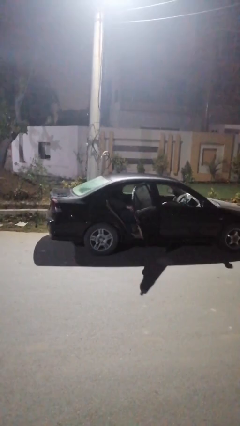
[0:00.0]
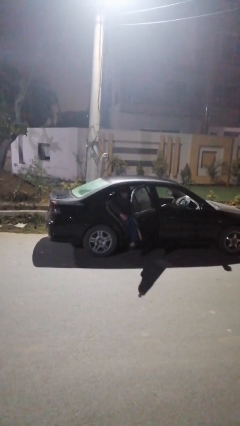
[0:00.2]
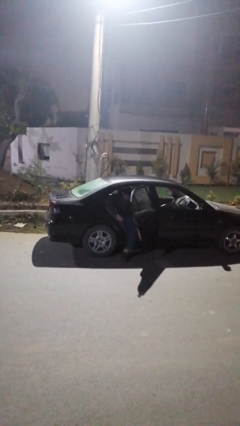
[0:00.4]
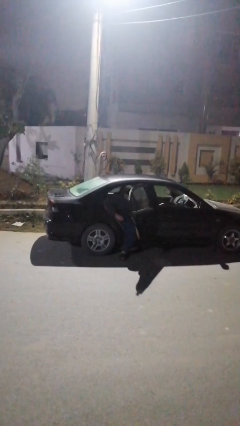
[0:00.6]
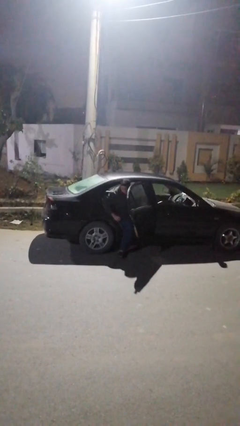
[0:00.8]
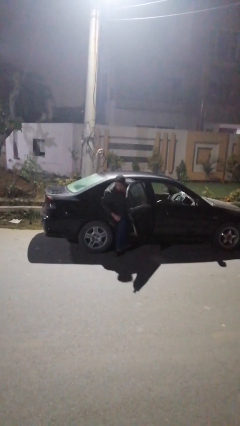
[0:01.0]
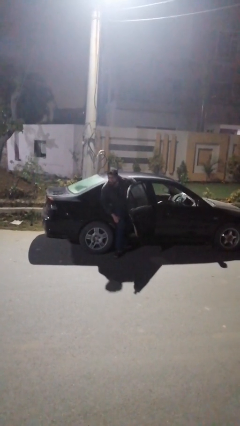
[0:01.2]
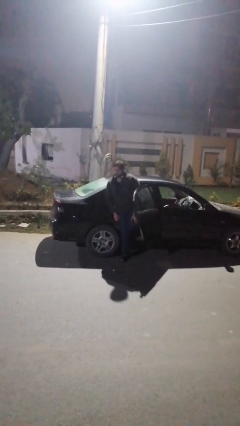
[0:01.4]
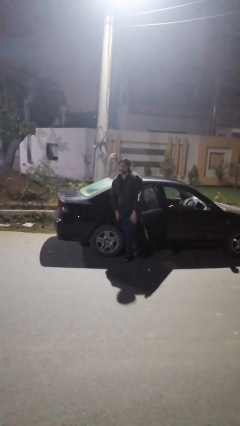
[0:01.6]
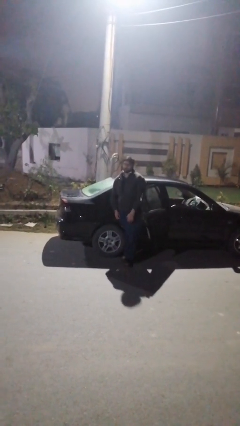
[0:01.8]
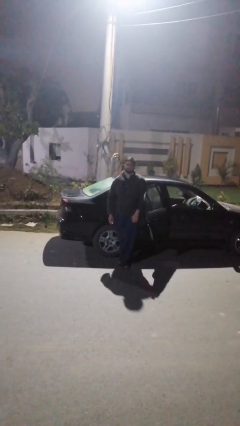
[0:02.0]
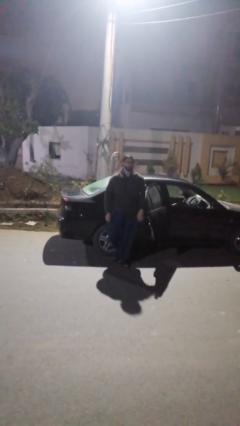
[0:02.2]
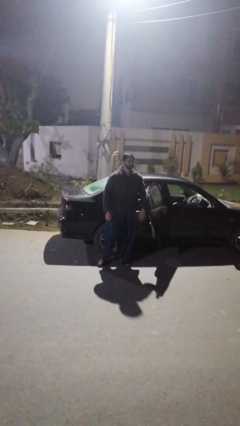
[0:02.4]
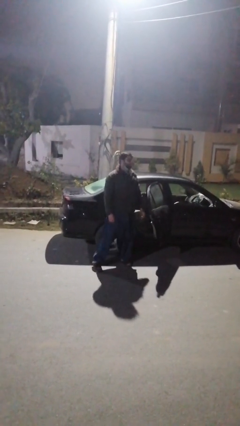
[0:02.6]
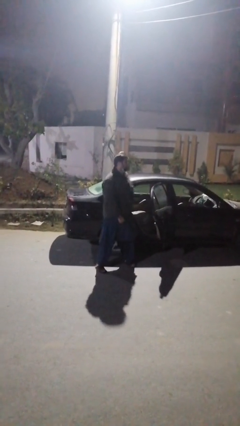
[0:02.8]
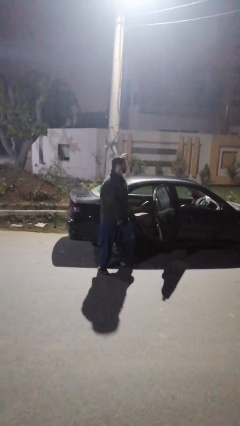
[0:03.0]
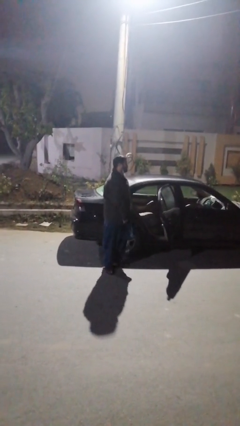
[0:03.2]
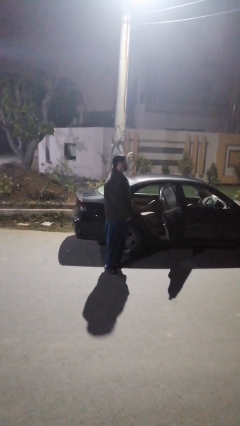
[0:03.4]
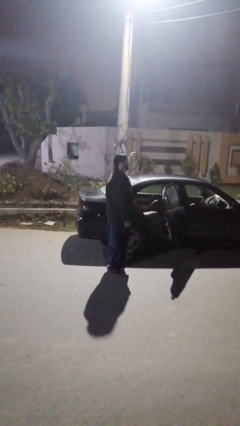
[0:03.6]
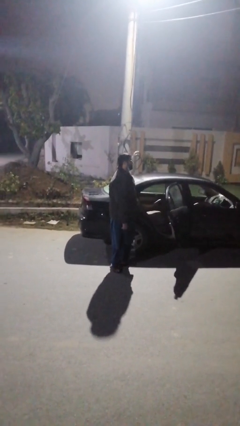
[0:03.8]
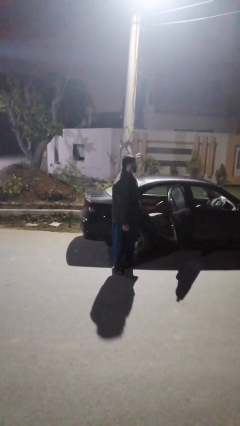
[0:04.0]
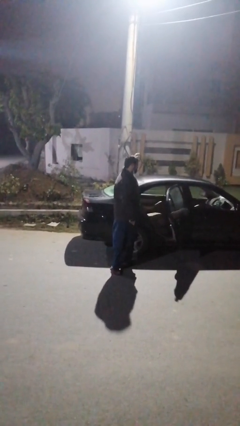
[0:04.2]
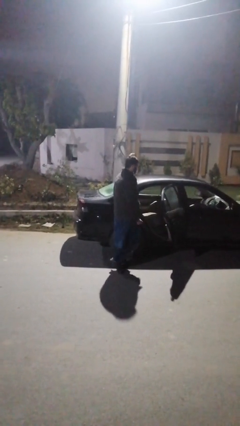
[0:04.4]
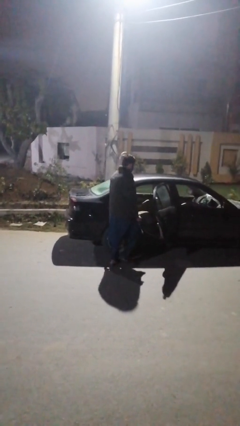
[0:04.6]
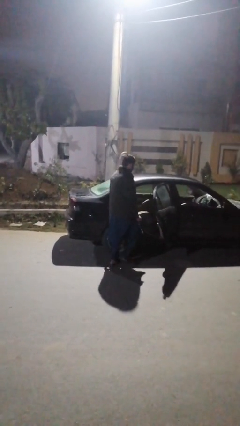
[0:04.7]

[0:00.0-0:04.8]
person exits car

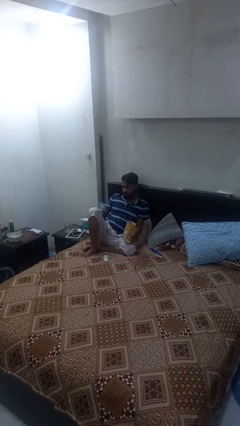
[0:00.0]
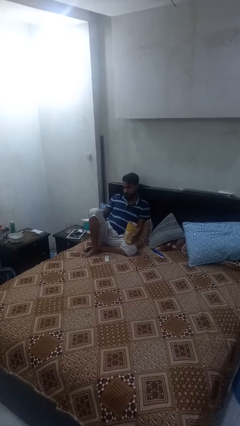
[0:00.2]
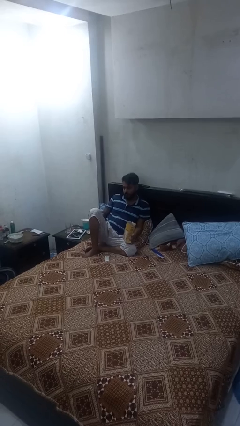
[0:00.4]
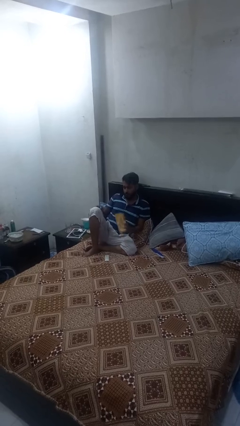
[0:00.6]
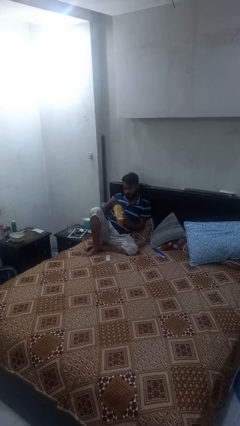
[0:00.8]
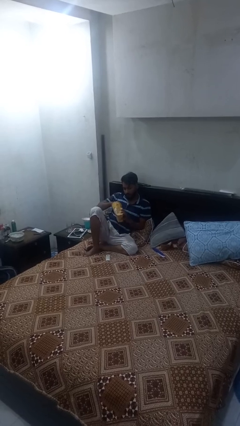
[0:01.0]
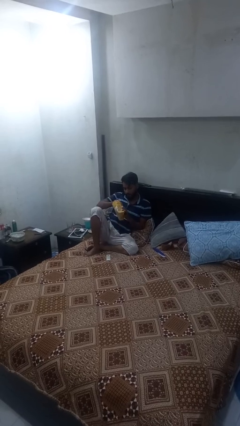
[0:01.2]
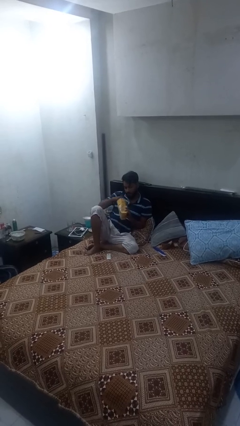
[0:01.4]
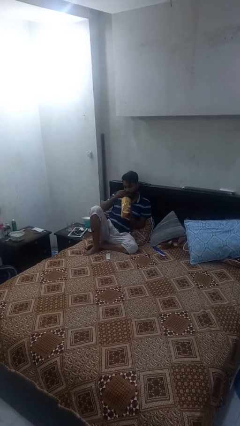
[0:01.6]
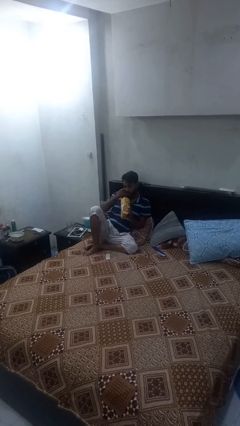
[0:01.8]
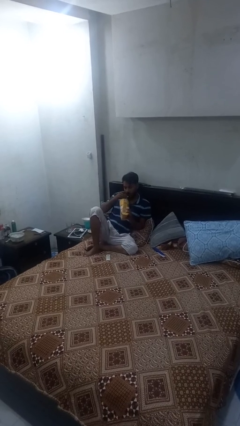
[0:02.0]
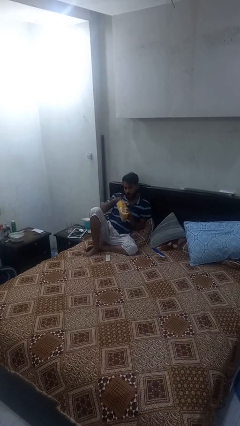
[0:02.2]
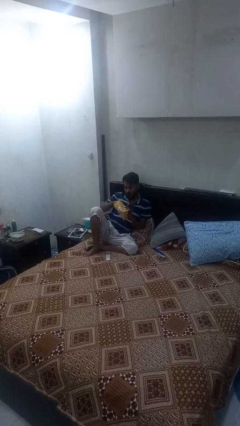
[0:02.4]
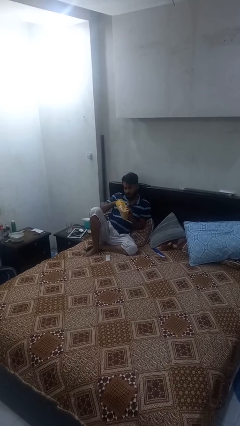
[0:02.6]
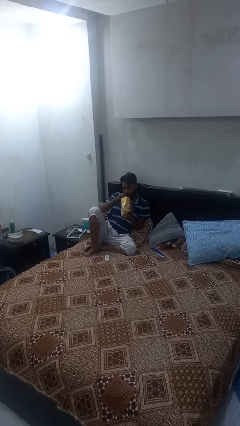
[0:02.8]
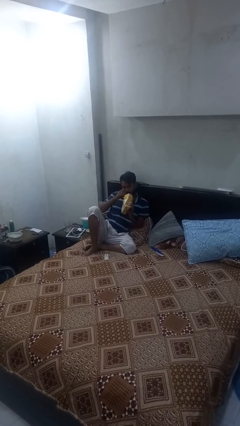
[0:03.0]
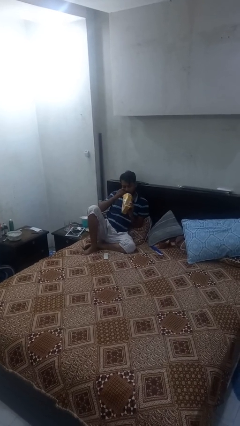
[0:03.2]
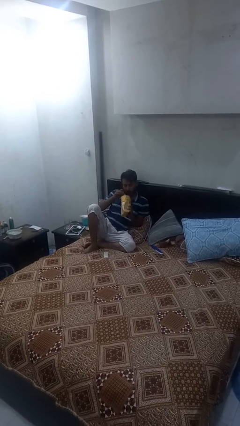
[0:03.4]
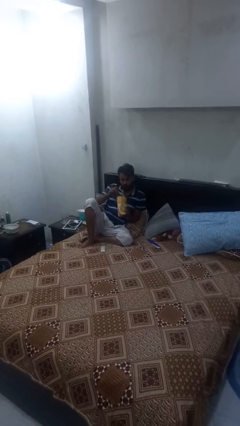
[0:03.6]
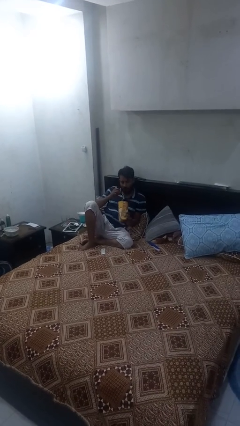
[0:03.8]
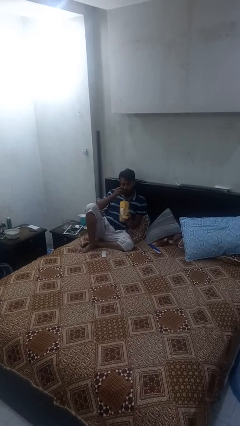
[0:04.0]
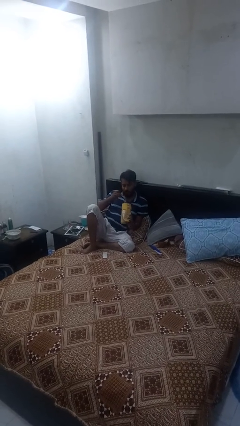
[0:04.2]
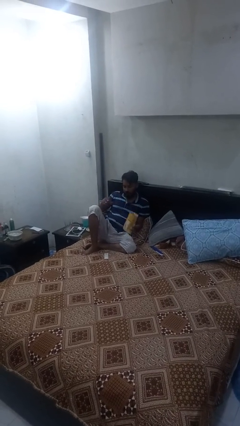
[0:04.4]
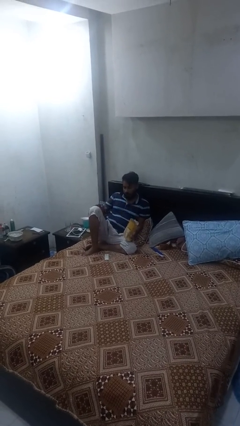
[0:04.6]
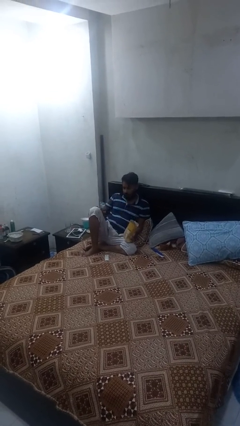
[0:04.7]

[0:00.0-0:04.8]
person eats snack from bag

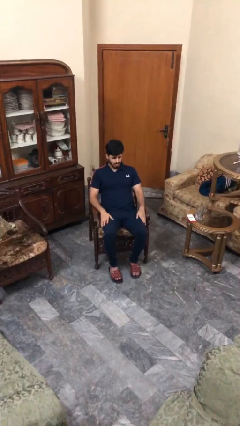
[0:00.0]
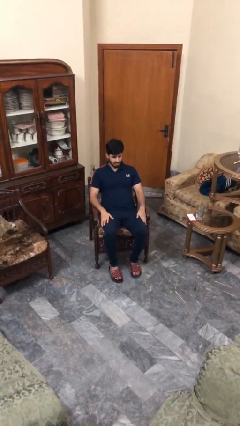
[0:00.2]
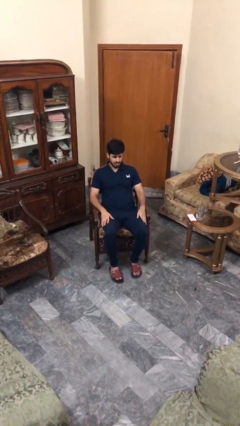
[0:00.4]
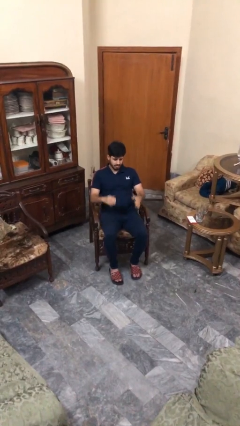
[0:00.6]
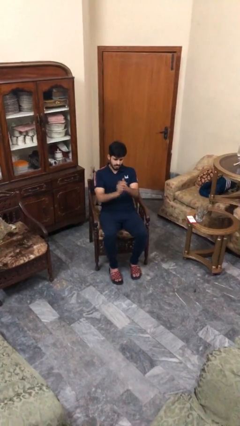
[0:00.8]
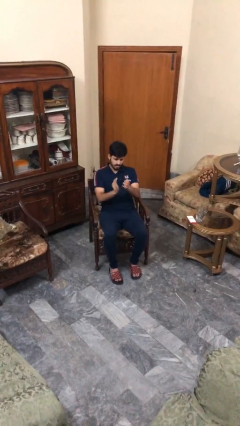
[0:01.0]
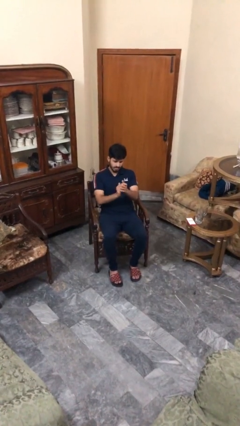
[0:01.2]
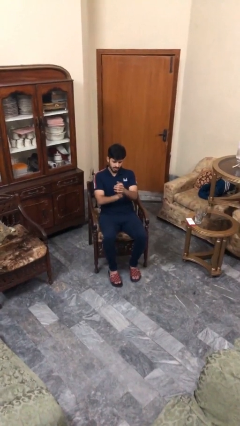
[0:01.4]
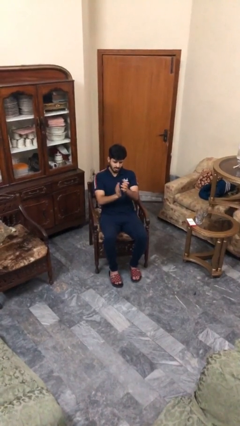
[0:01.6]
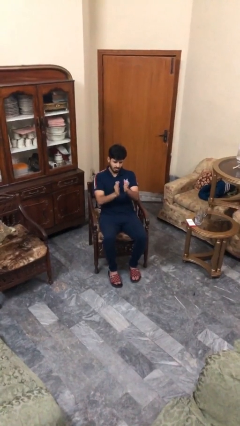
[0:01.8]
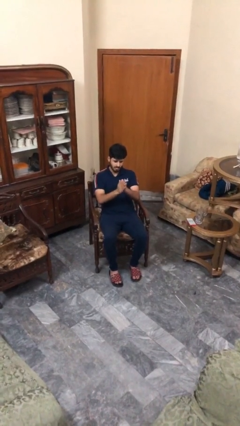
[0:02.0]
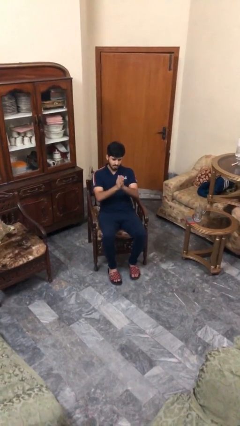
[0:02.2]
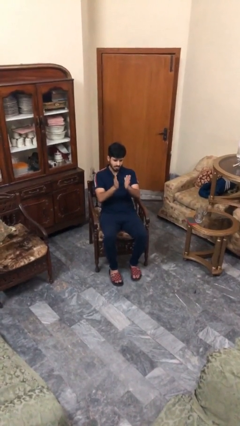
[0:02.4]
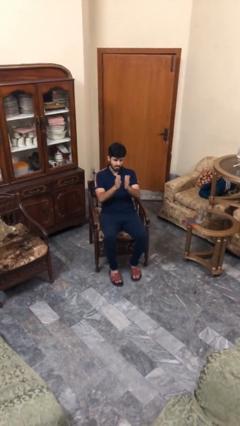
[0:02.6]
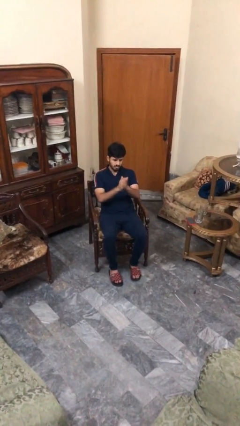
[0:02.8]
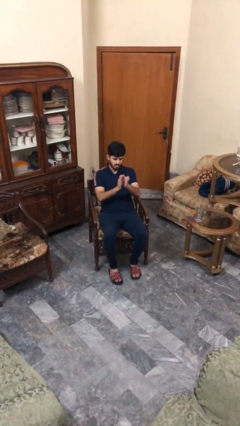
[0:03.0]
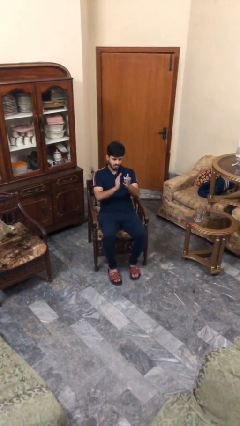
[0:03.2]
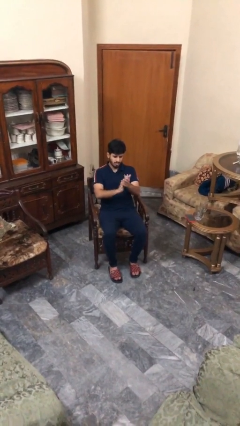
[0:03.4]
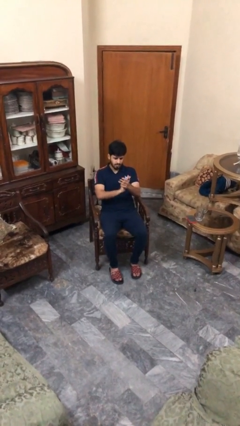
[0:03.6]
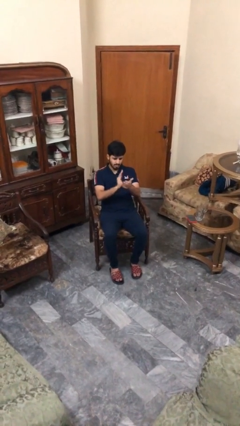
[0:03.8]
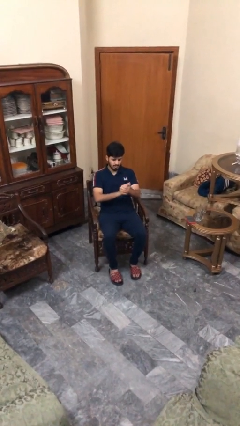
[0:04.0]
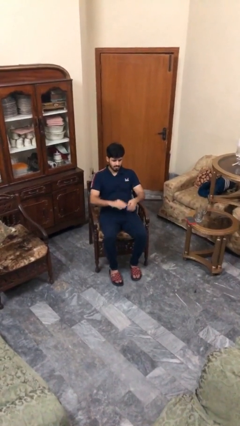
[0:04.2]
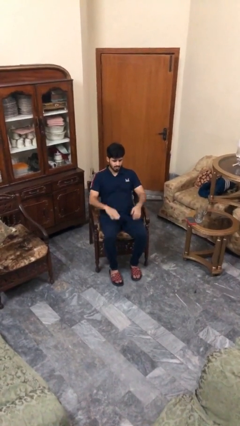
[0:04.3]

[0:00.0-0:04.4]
person claps hands

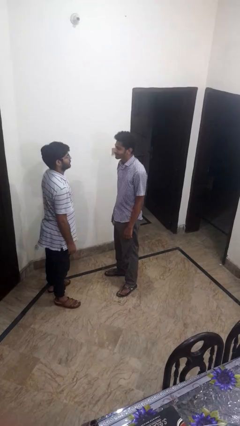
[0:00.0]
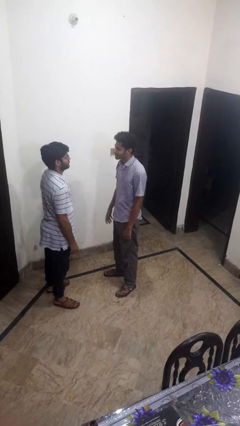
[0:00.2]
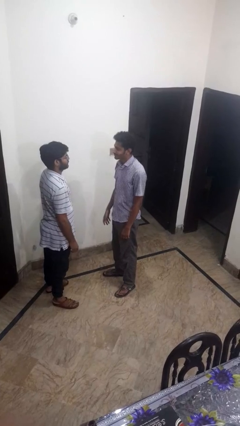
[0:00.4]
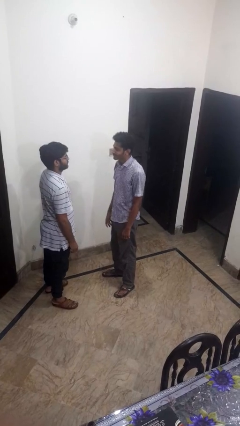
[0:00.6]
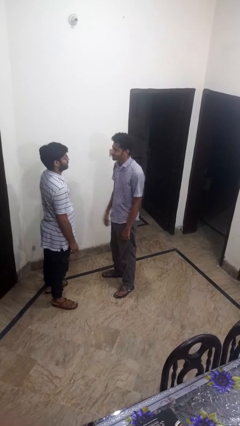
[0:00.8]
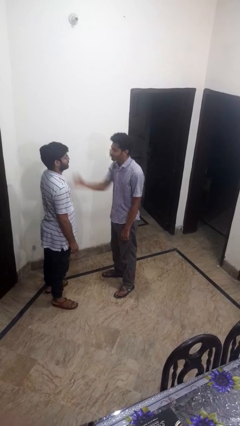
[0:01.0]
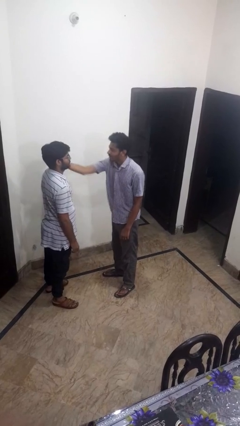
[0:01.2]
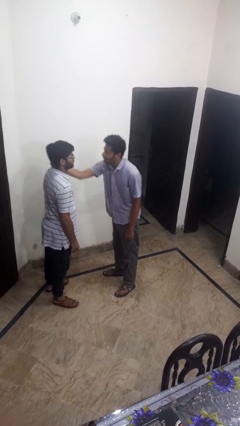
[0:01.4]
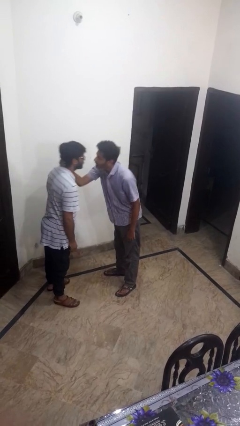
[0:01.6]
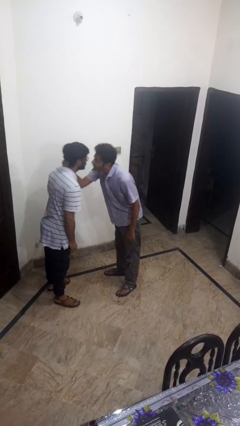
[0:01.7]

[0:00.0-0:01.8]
person grabs person by forearm

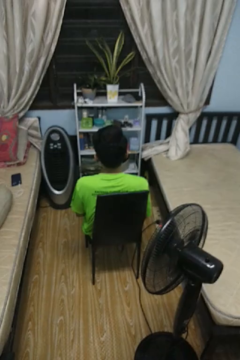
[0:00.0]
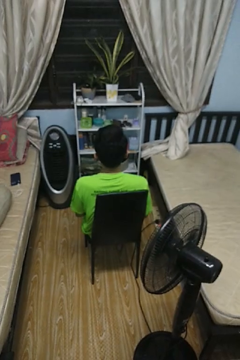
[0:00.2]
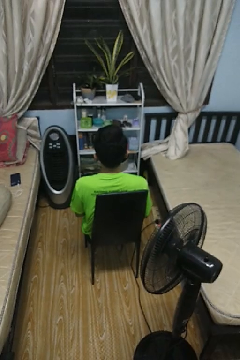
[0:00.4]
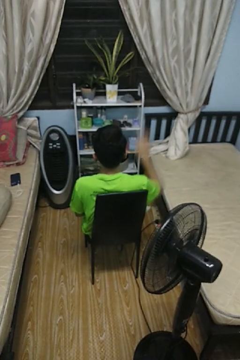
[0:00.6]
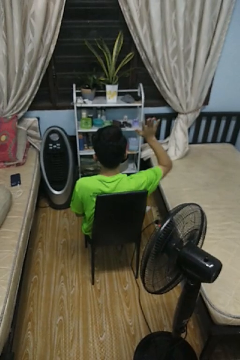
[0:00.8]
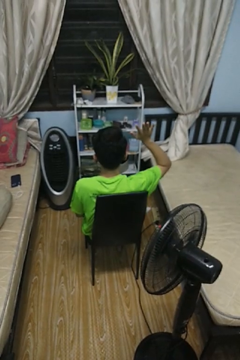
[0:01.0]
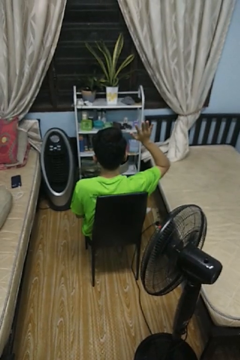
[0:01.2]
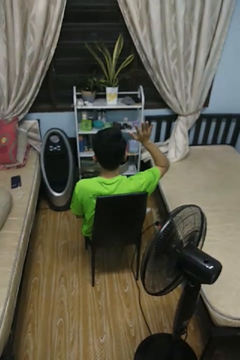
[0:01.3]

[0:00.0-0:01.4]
person gestures number five

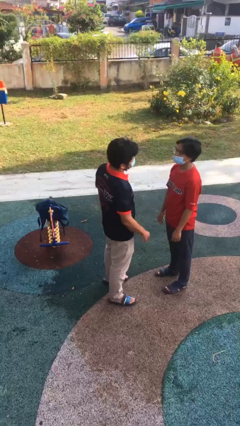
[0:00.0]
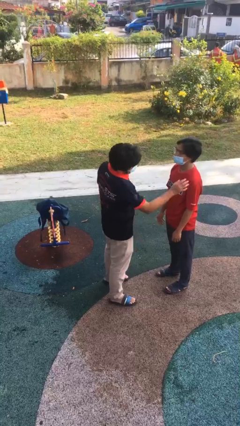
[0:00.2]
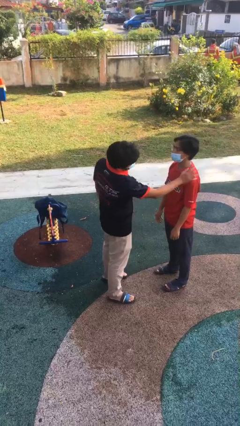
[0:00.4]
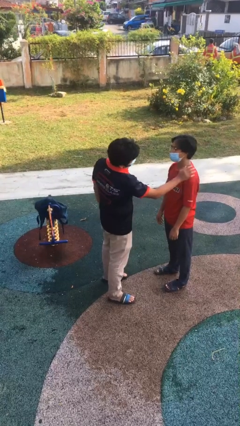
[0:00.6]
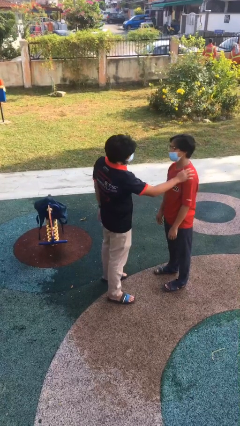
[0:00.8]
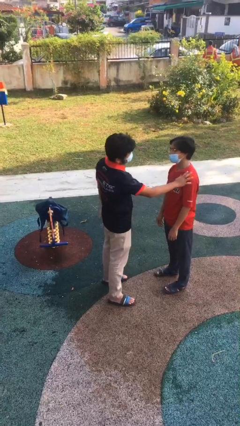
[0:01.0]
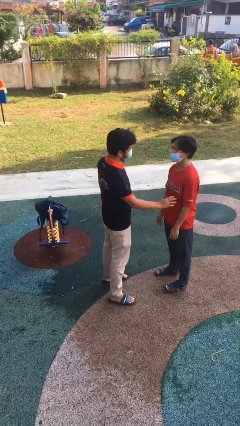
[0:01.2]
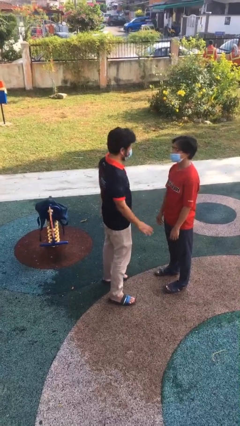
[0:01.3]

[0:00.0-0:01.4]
person pounds shoulders of person
